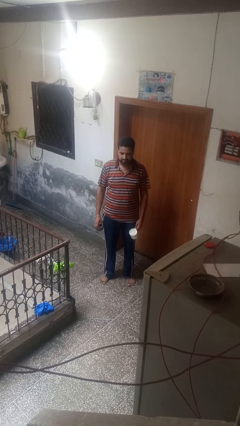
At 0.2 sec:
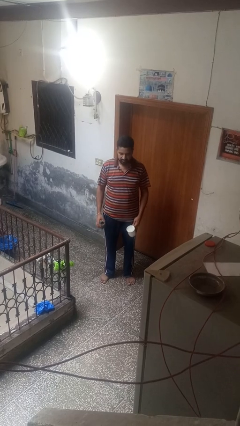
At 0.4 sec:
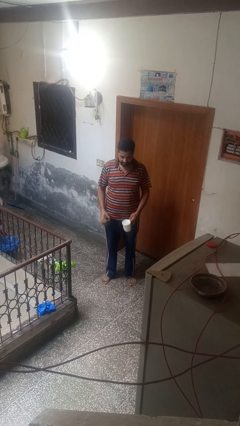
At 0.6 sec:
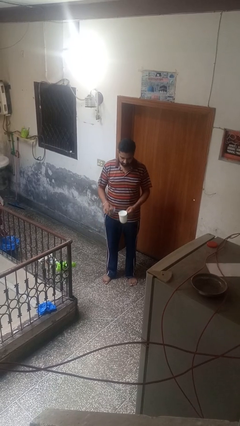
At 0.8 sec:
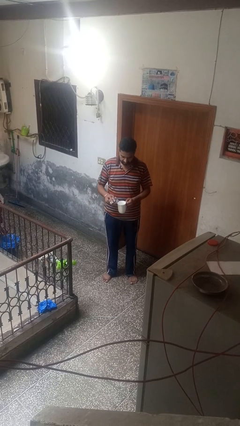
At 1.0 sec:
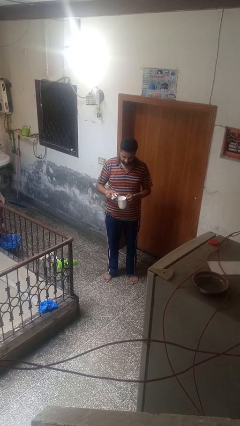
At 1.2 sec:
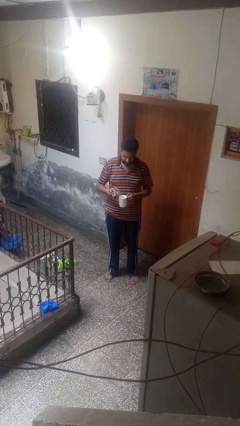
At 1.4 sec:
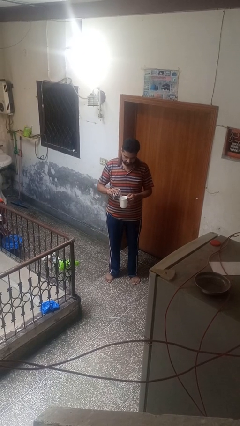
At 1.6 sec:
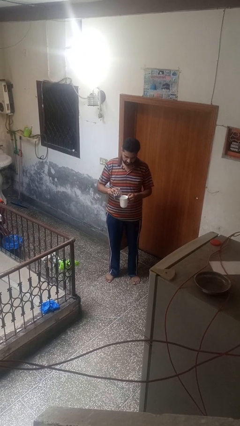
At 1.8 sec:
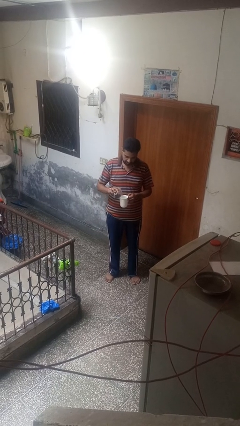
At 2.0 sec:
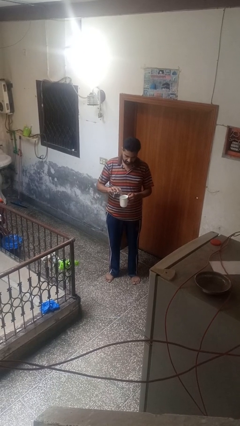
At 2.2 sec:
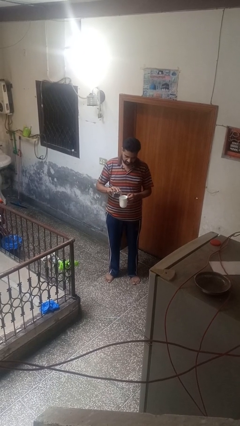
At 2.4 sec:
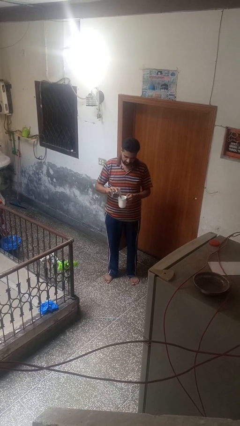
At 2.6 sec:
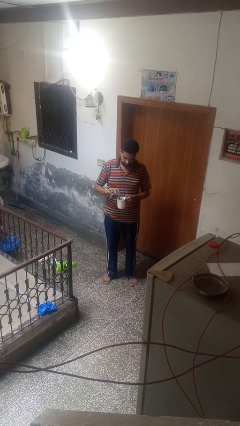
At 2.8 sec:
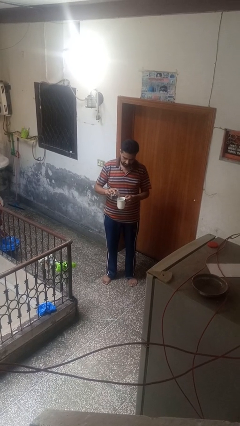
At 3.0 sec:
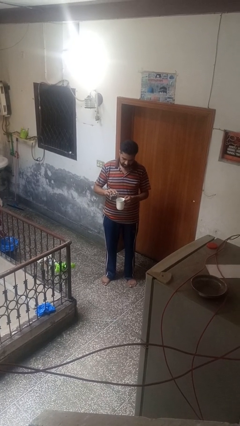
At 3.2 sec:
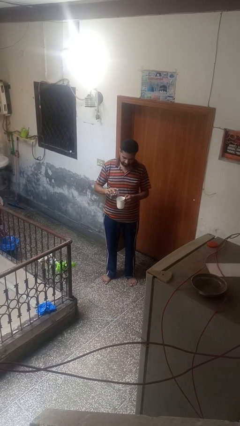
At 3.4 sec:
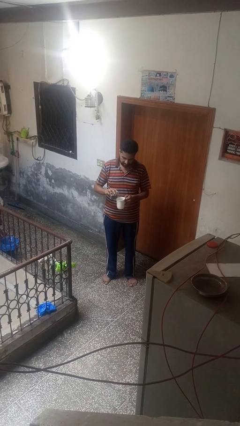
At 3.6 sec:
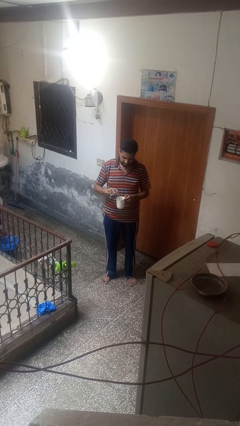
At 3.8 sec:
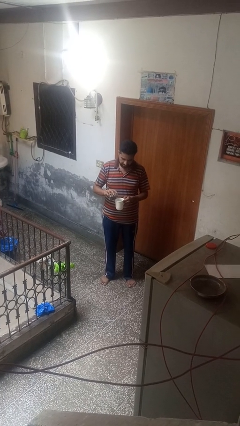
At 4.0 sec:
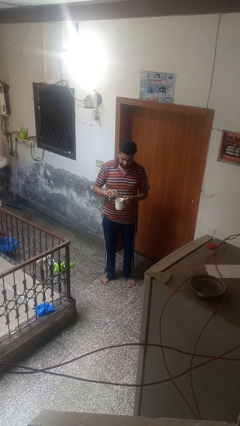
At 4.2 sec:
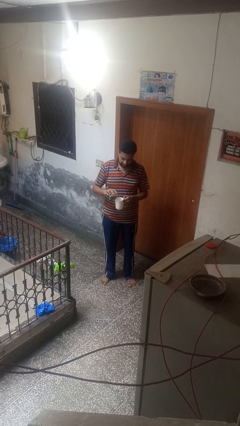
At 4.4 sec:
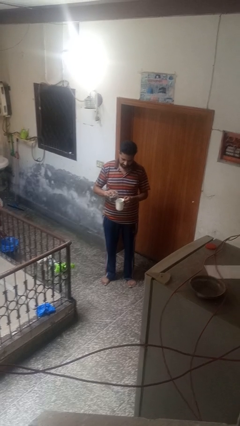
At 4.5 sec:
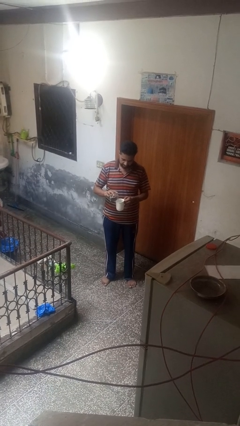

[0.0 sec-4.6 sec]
person pours coffee into mug

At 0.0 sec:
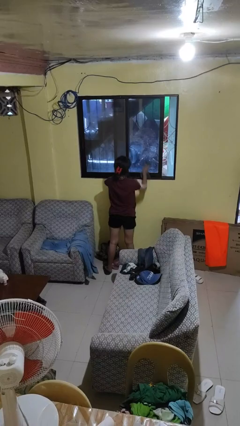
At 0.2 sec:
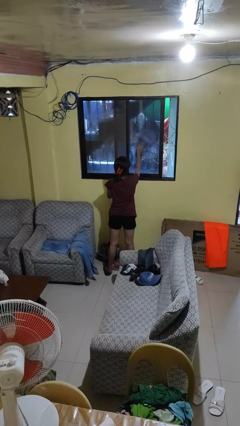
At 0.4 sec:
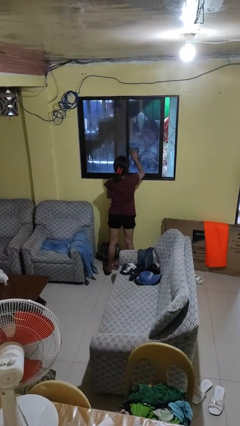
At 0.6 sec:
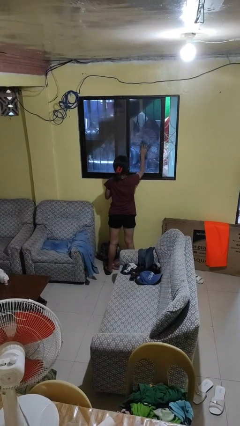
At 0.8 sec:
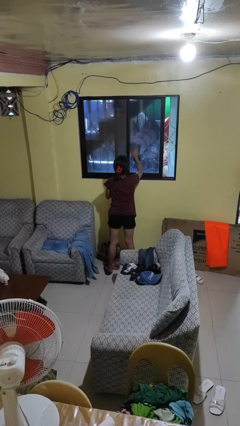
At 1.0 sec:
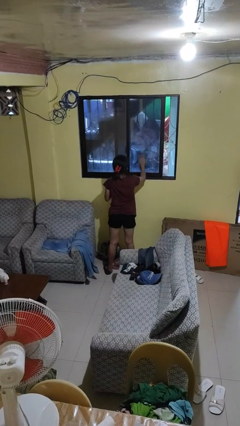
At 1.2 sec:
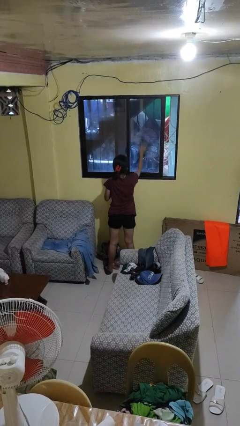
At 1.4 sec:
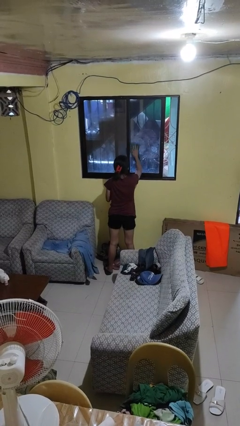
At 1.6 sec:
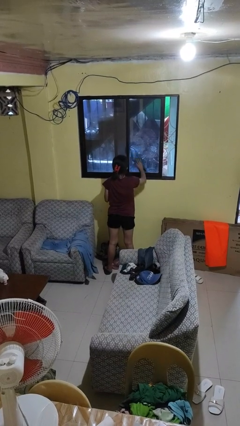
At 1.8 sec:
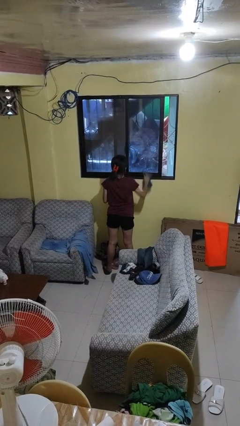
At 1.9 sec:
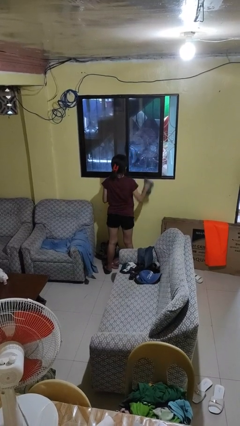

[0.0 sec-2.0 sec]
person washes window

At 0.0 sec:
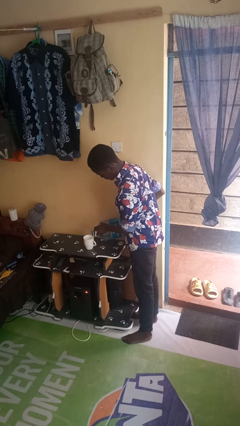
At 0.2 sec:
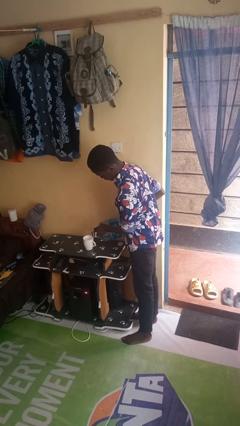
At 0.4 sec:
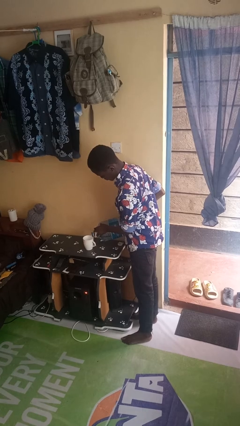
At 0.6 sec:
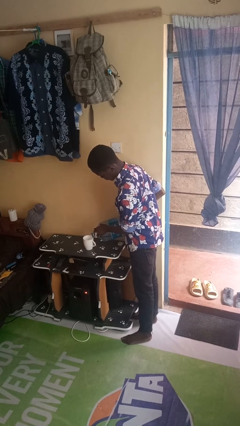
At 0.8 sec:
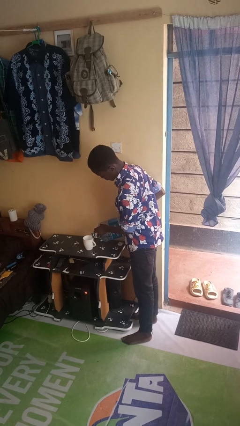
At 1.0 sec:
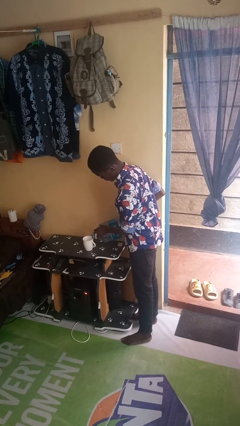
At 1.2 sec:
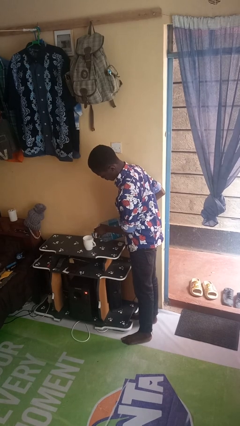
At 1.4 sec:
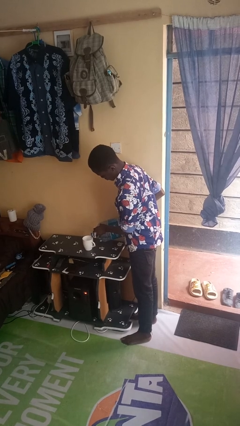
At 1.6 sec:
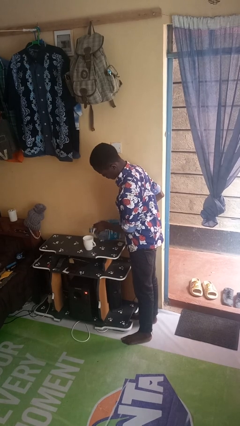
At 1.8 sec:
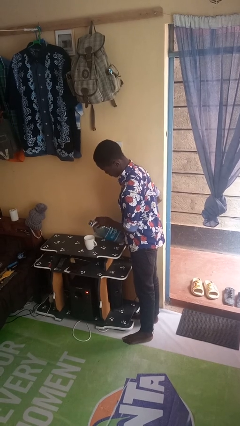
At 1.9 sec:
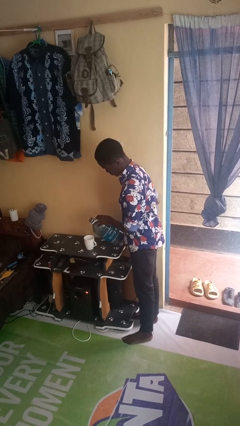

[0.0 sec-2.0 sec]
person pours liquid into cup

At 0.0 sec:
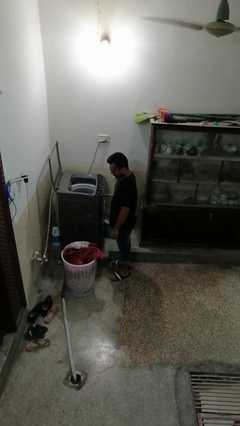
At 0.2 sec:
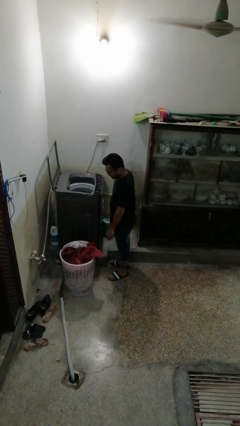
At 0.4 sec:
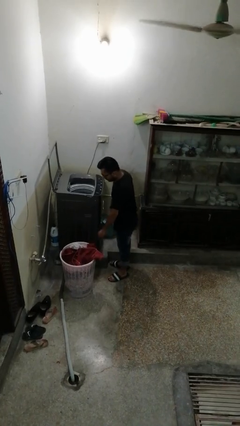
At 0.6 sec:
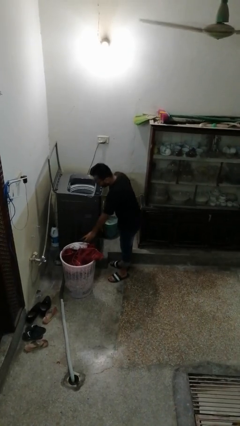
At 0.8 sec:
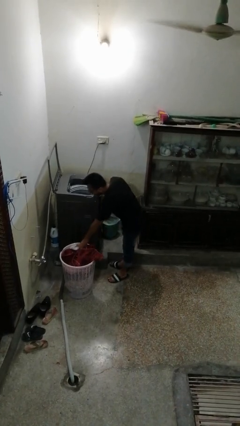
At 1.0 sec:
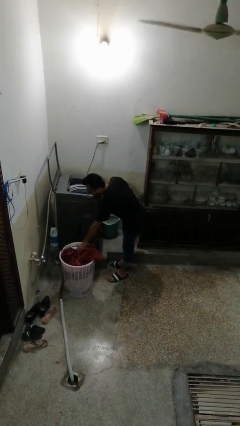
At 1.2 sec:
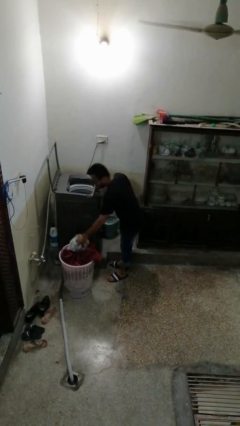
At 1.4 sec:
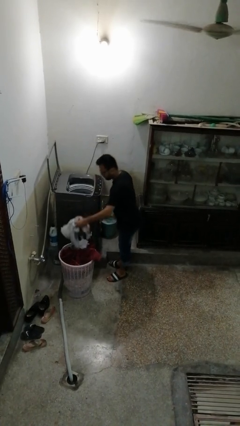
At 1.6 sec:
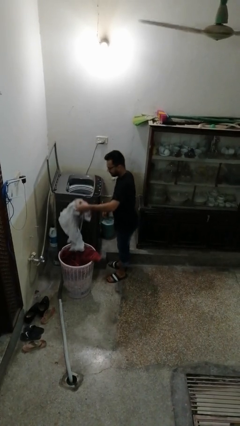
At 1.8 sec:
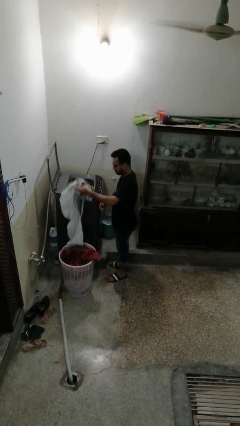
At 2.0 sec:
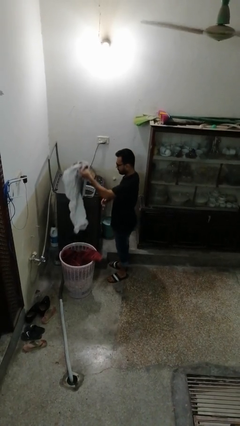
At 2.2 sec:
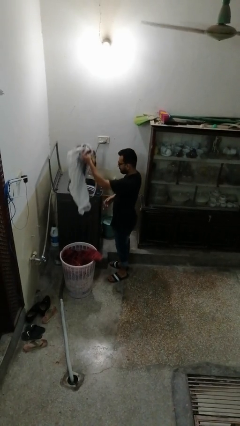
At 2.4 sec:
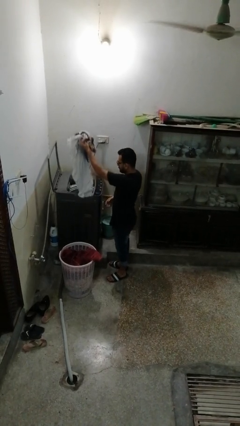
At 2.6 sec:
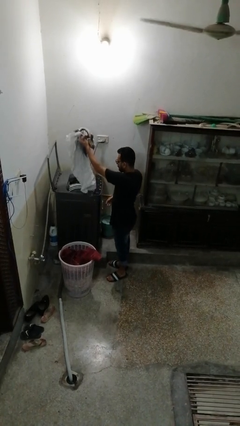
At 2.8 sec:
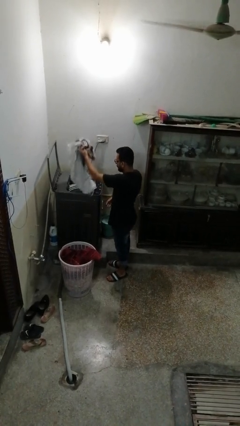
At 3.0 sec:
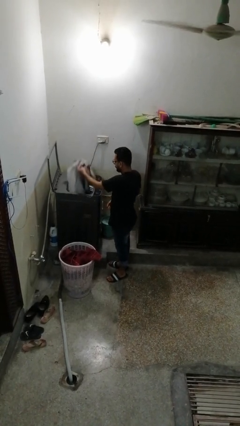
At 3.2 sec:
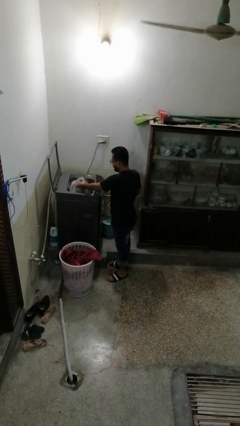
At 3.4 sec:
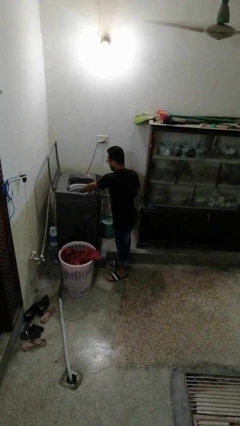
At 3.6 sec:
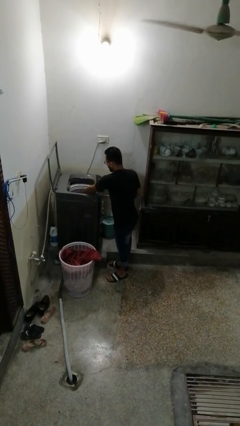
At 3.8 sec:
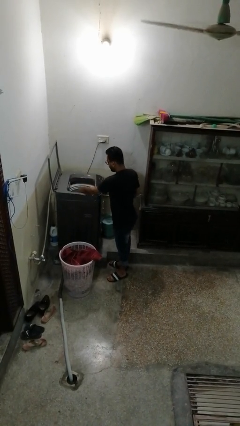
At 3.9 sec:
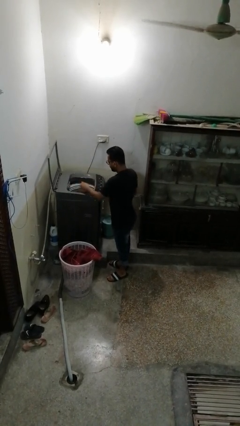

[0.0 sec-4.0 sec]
person loads clotheswasher

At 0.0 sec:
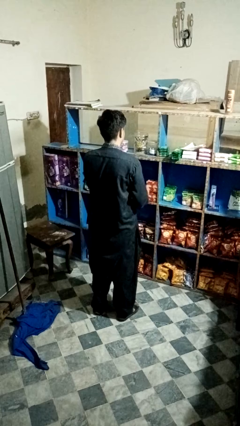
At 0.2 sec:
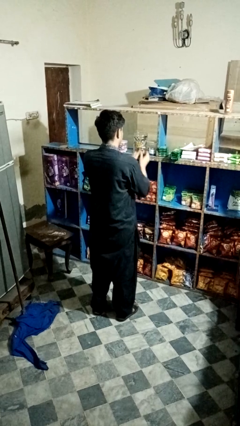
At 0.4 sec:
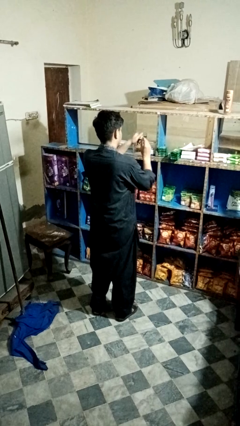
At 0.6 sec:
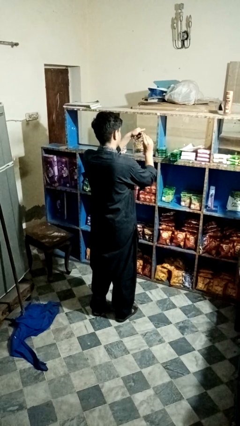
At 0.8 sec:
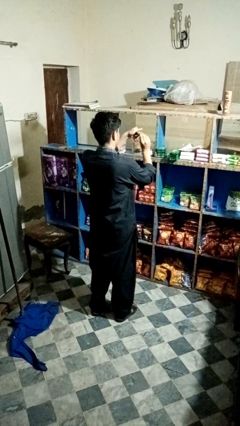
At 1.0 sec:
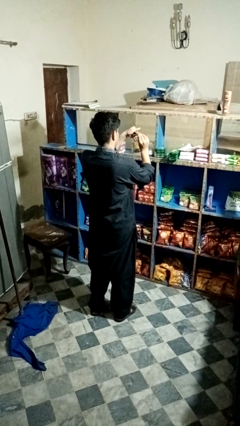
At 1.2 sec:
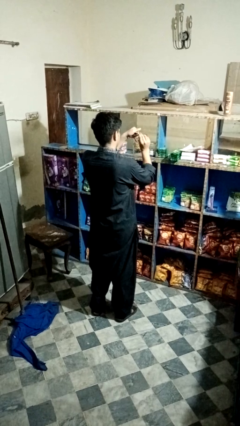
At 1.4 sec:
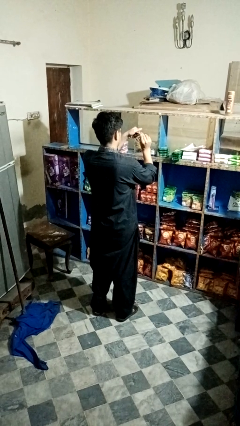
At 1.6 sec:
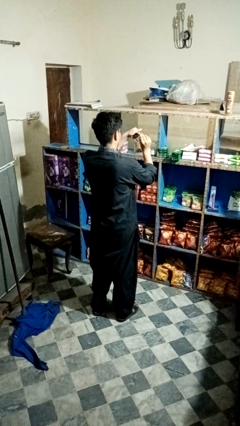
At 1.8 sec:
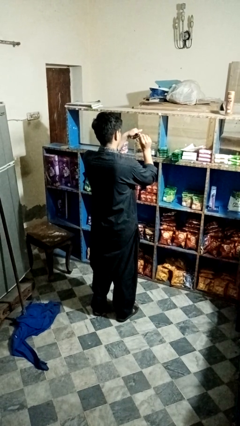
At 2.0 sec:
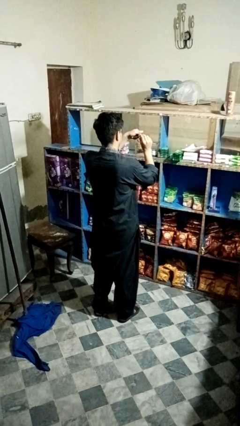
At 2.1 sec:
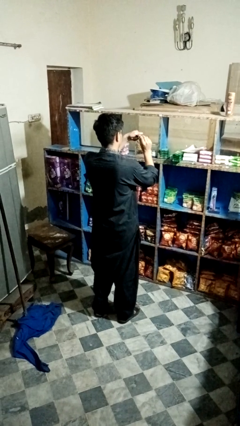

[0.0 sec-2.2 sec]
person clips fingernails

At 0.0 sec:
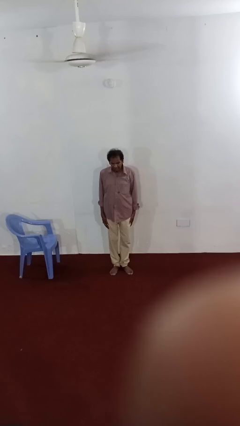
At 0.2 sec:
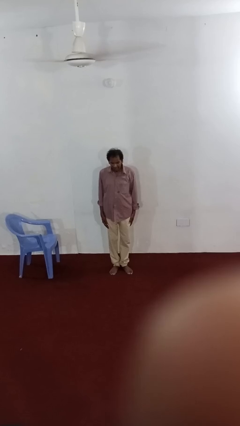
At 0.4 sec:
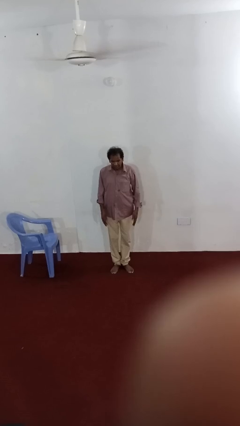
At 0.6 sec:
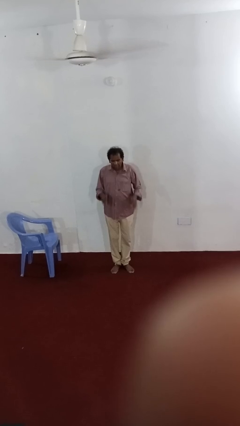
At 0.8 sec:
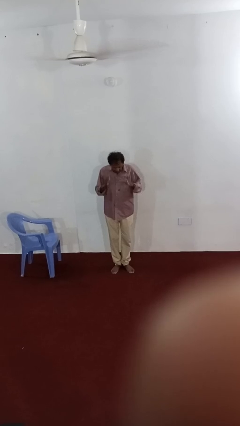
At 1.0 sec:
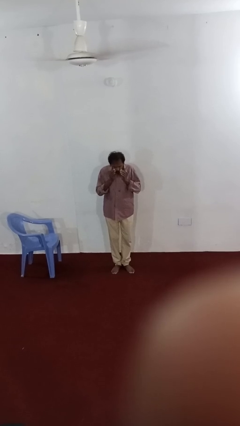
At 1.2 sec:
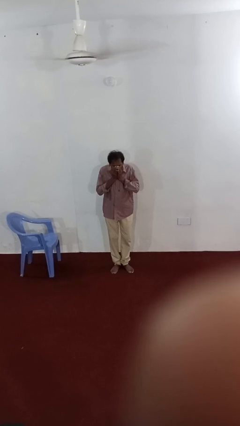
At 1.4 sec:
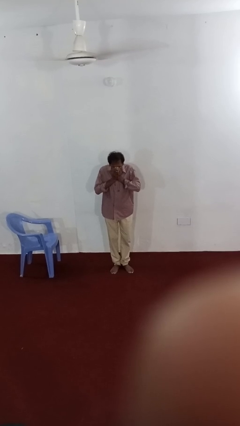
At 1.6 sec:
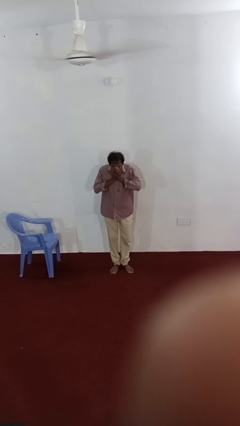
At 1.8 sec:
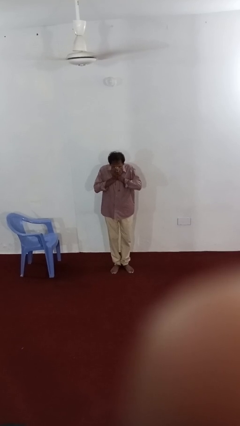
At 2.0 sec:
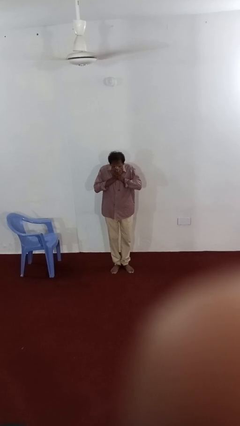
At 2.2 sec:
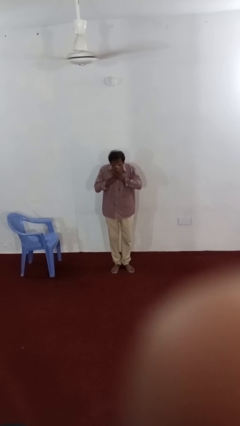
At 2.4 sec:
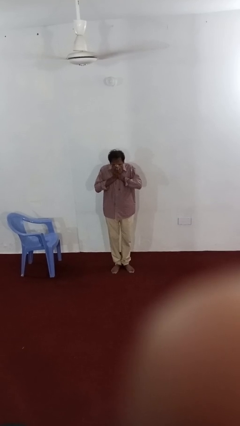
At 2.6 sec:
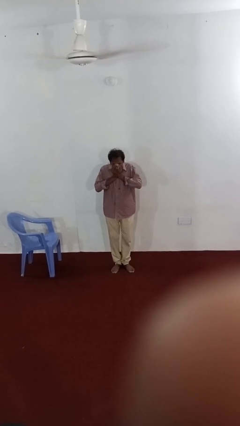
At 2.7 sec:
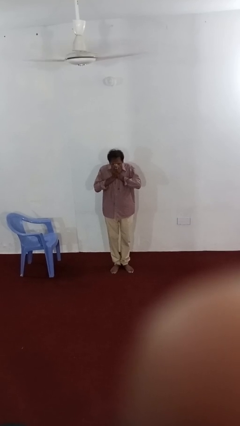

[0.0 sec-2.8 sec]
person sneezes into hand
